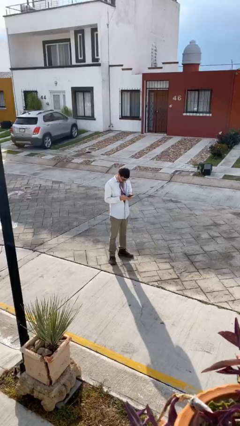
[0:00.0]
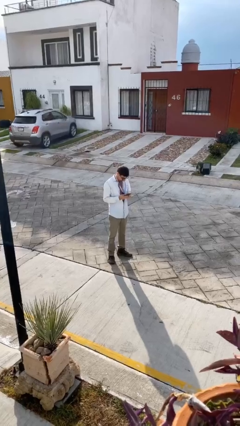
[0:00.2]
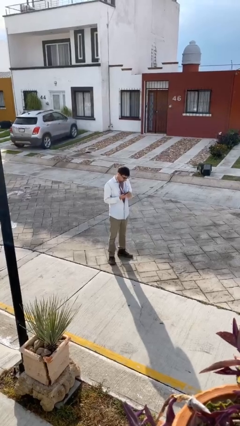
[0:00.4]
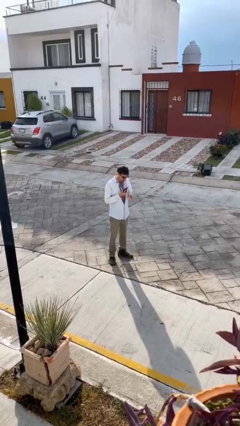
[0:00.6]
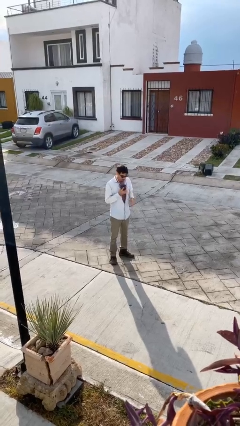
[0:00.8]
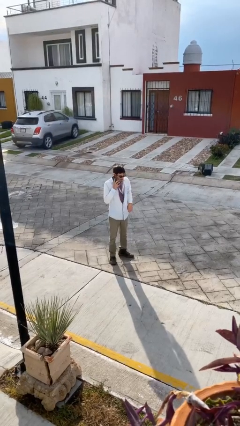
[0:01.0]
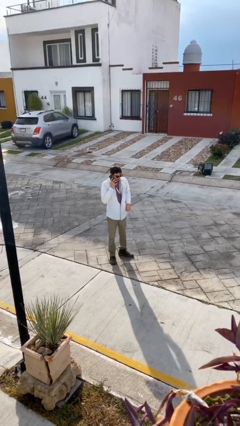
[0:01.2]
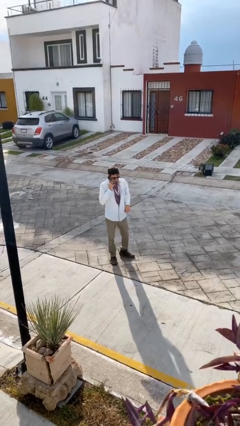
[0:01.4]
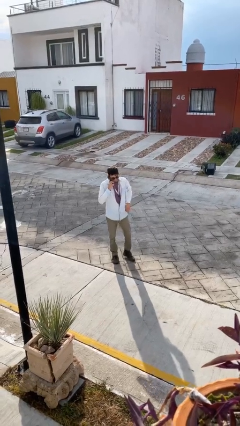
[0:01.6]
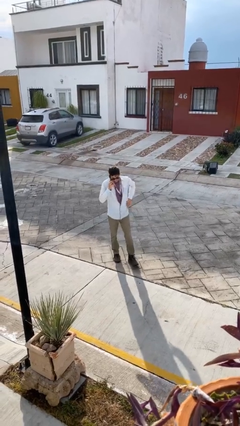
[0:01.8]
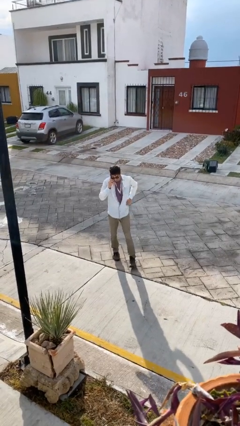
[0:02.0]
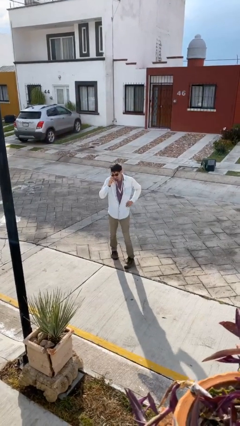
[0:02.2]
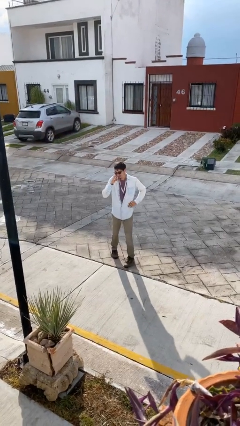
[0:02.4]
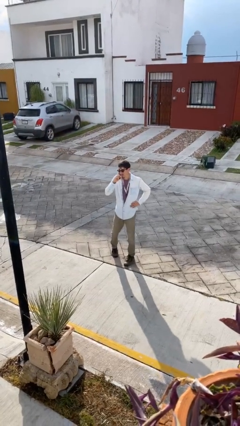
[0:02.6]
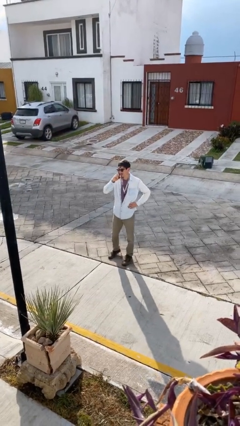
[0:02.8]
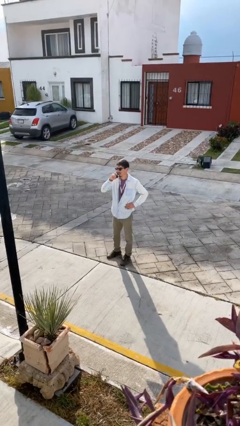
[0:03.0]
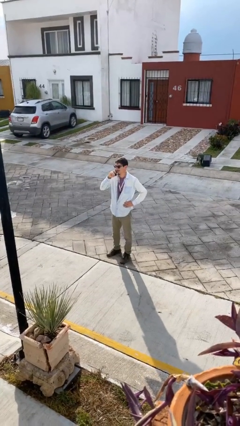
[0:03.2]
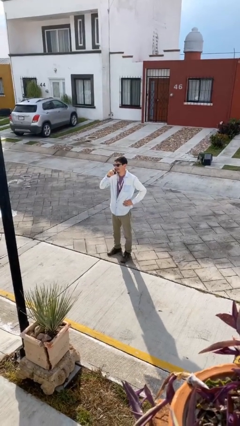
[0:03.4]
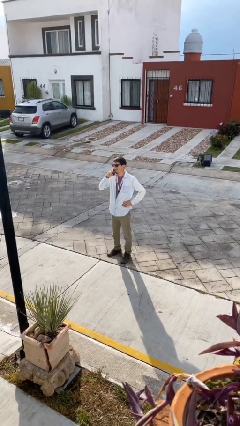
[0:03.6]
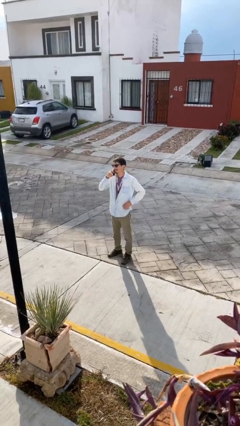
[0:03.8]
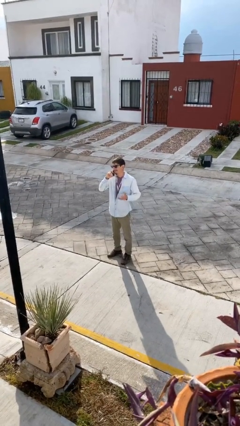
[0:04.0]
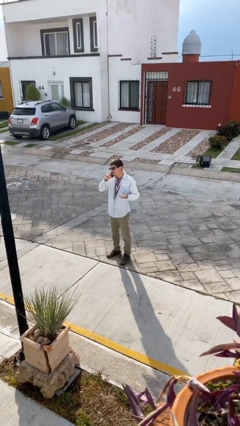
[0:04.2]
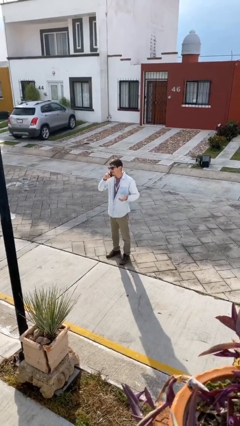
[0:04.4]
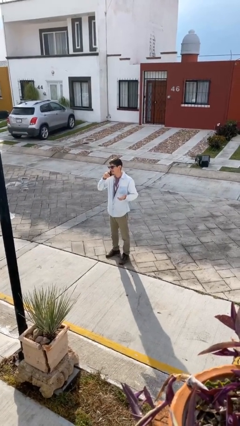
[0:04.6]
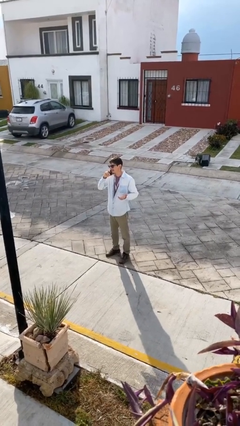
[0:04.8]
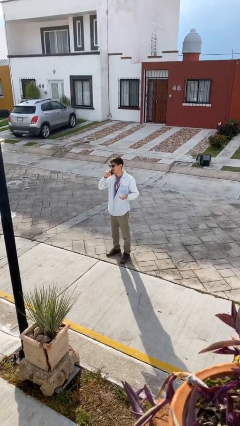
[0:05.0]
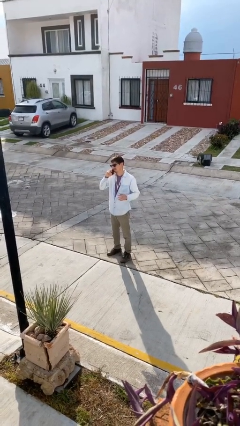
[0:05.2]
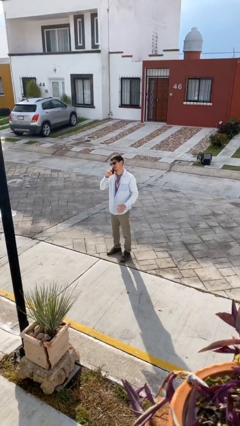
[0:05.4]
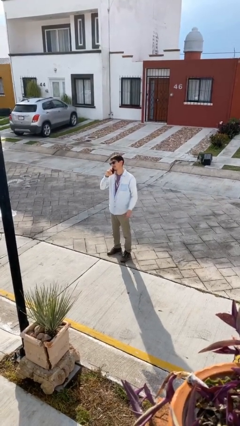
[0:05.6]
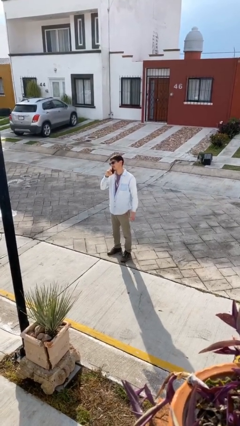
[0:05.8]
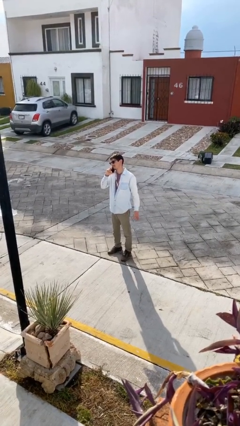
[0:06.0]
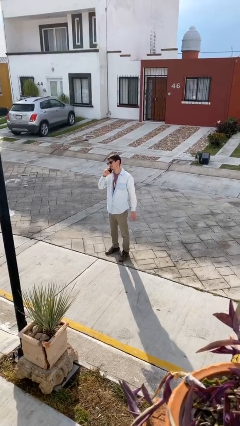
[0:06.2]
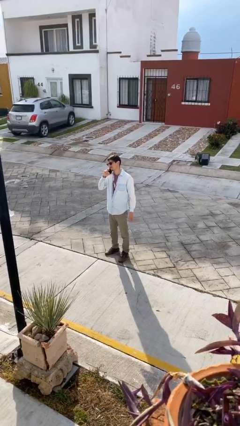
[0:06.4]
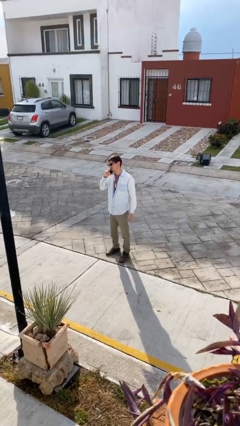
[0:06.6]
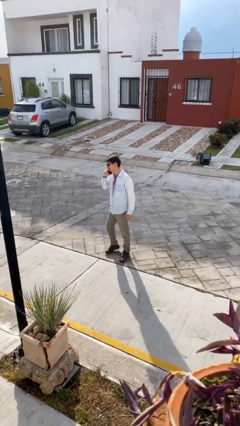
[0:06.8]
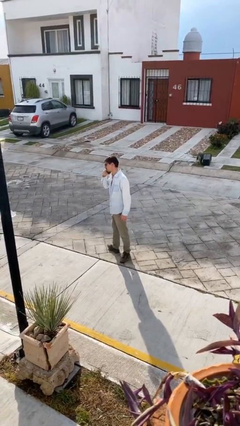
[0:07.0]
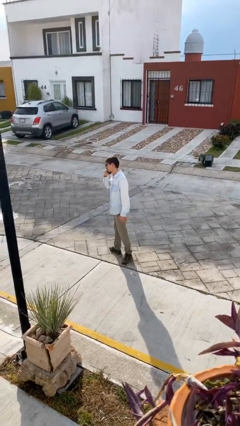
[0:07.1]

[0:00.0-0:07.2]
person talks on phone

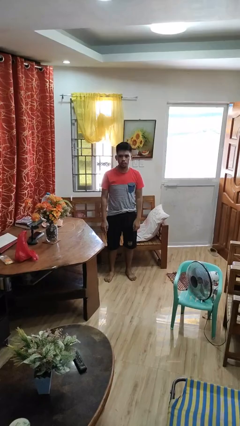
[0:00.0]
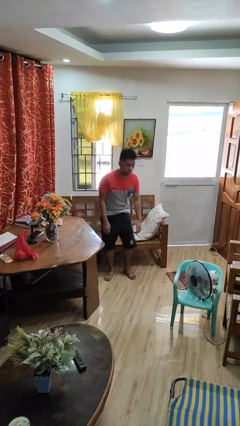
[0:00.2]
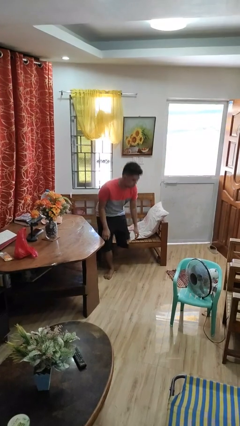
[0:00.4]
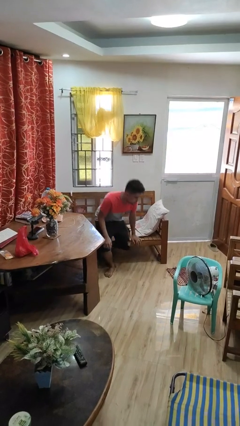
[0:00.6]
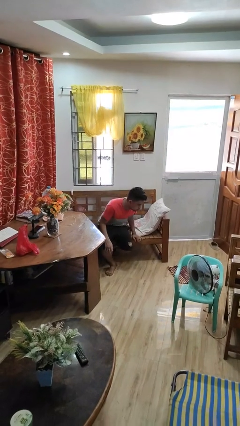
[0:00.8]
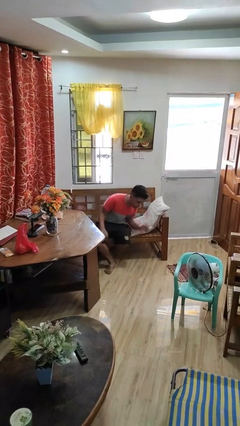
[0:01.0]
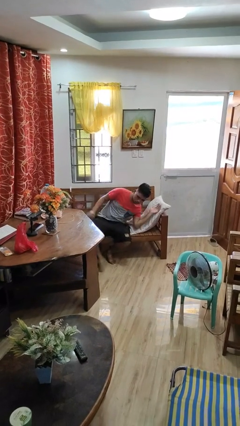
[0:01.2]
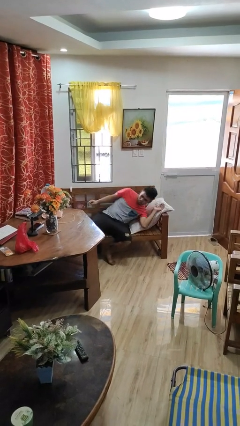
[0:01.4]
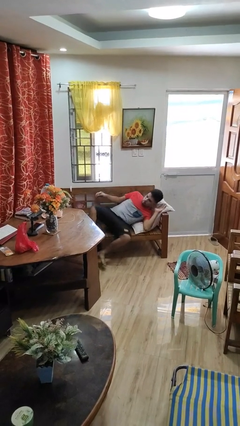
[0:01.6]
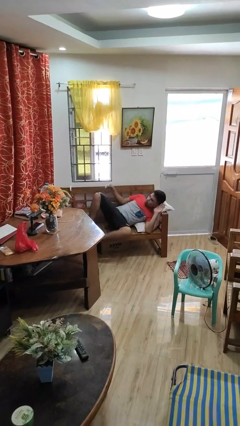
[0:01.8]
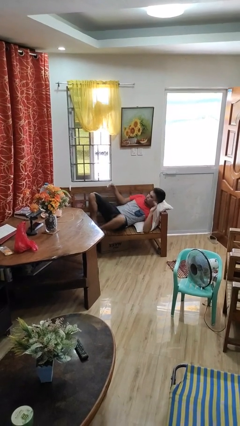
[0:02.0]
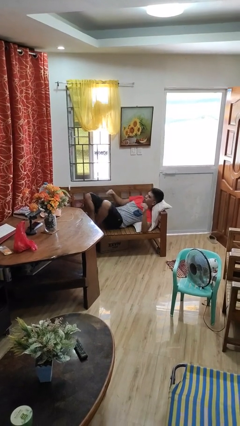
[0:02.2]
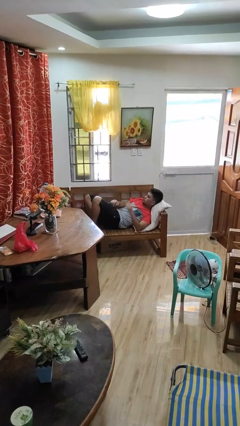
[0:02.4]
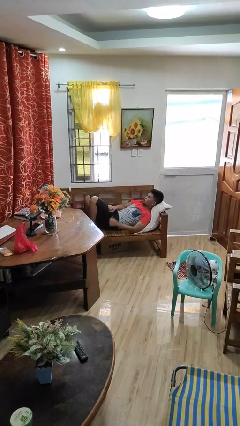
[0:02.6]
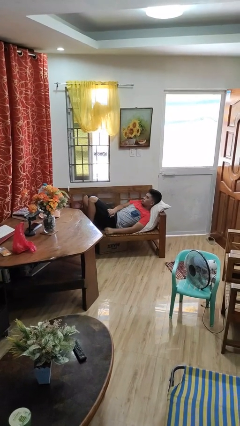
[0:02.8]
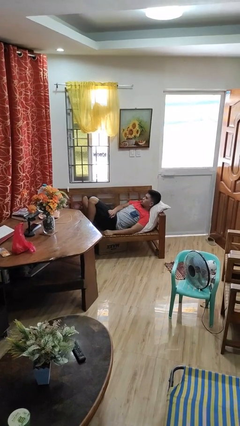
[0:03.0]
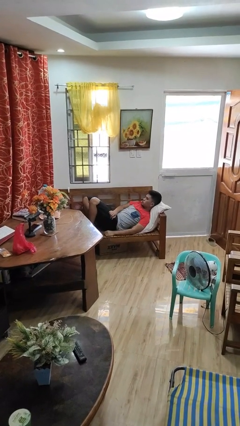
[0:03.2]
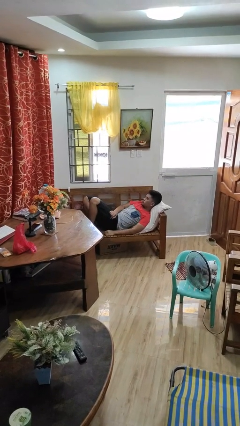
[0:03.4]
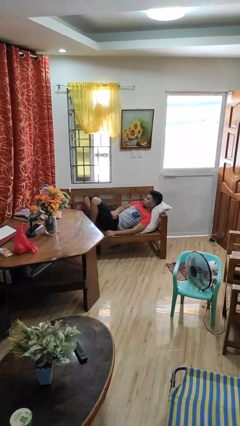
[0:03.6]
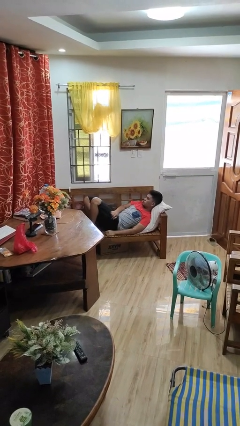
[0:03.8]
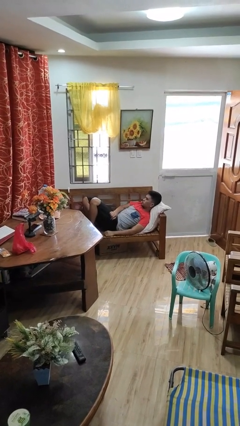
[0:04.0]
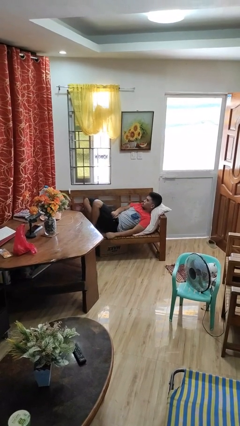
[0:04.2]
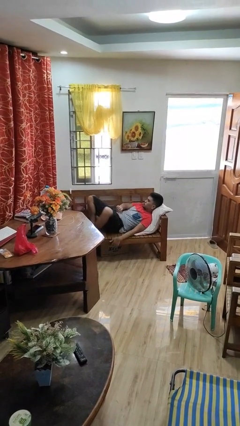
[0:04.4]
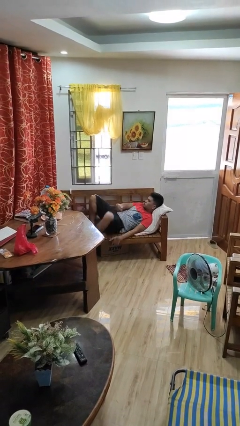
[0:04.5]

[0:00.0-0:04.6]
person lies down on couch

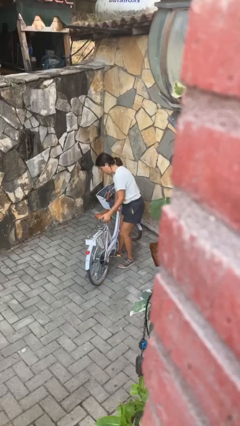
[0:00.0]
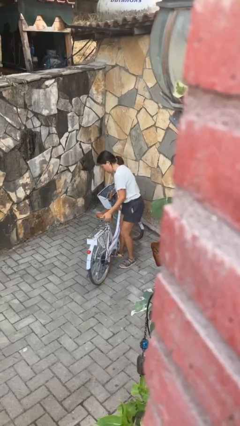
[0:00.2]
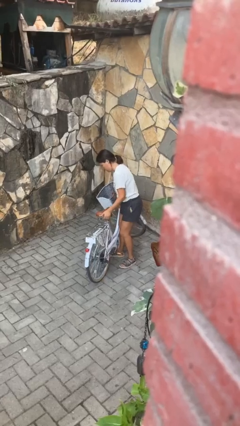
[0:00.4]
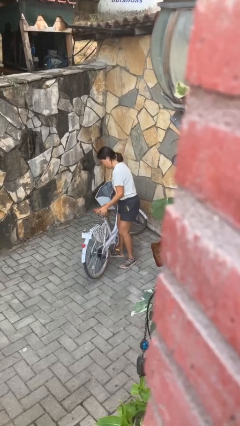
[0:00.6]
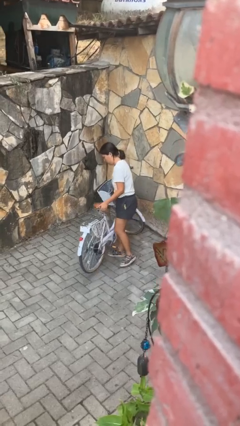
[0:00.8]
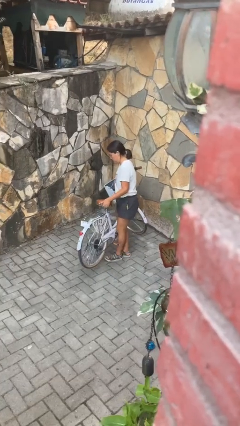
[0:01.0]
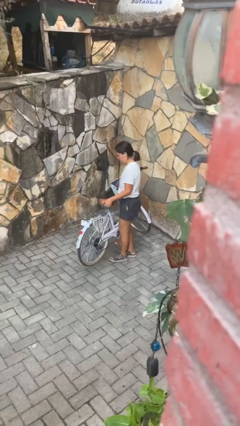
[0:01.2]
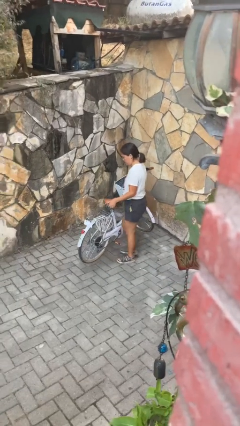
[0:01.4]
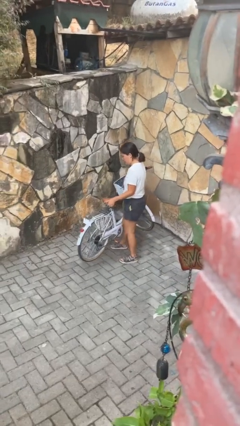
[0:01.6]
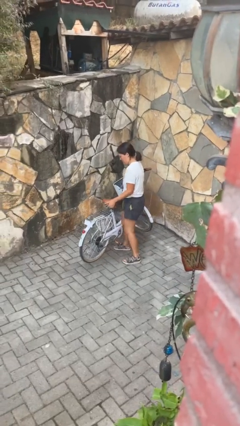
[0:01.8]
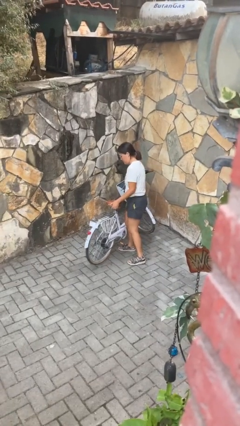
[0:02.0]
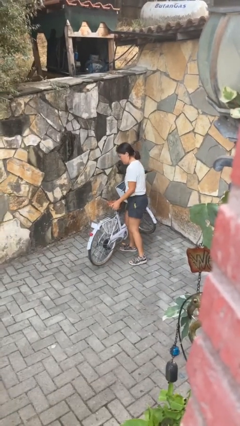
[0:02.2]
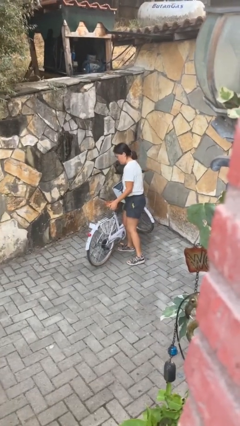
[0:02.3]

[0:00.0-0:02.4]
person carries bicycle

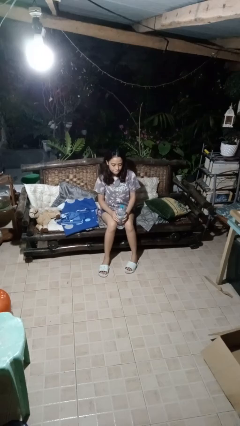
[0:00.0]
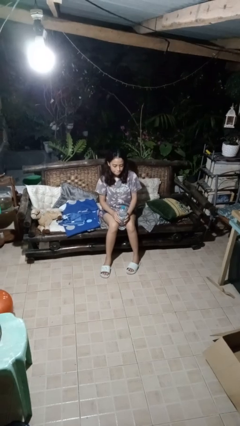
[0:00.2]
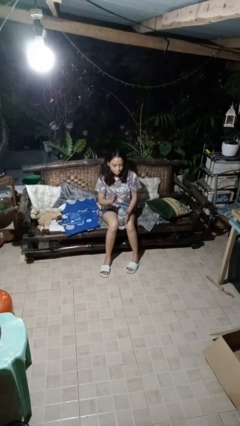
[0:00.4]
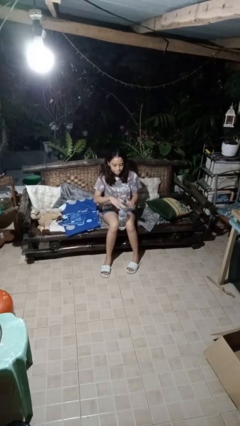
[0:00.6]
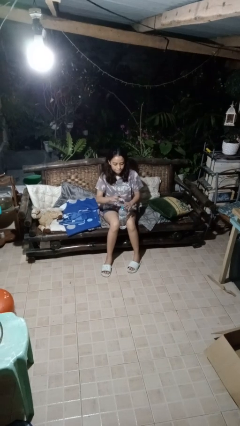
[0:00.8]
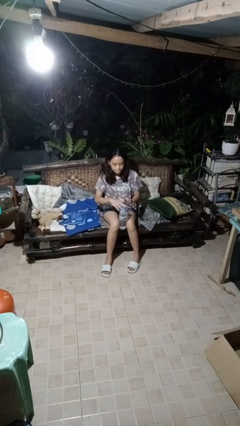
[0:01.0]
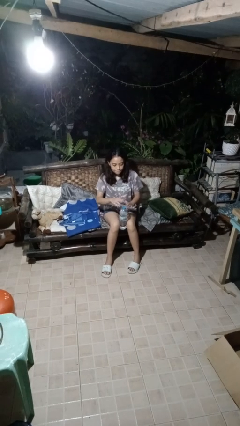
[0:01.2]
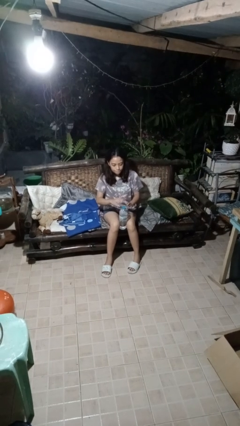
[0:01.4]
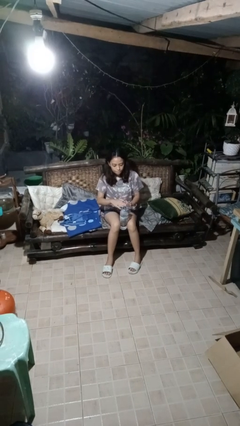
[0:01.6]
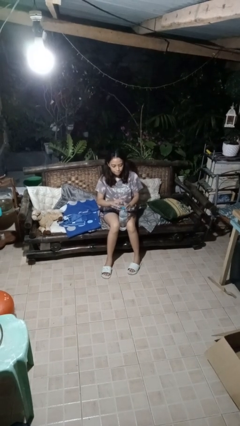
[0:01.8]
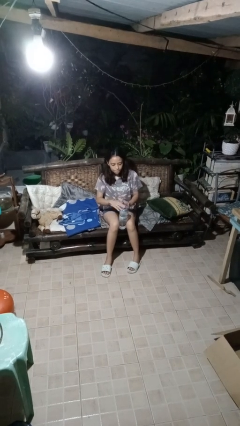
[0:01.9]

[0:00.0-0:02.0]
person taps object with finger

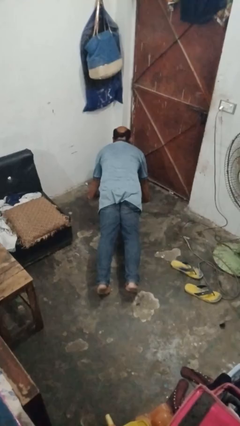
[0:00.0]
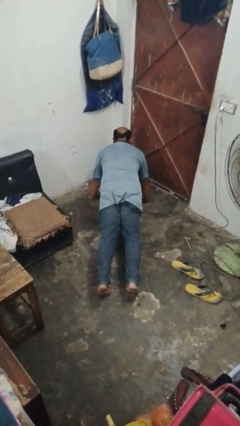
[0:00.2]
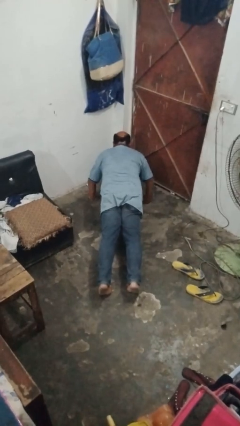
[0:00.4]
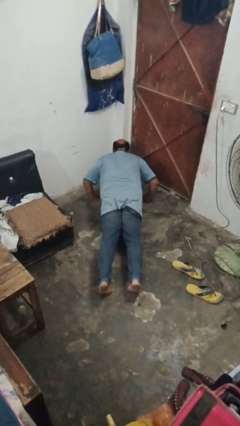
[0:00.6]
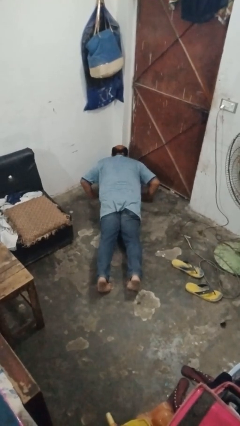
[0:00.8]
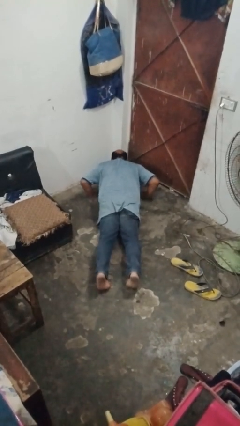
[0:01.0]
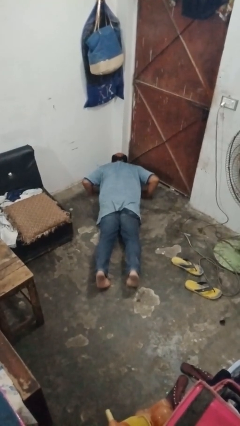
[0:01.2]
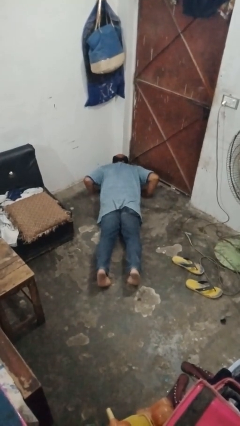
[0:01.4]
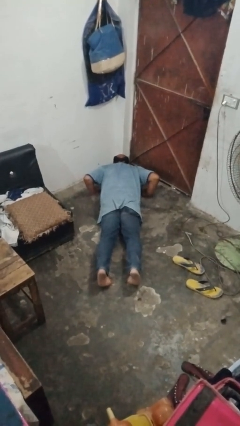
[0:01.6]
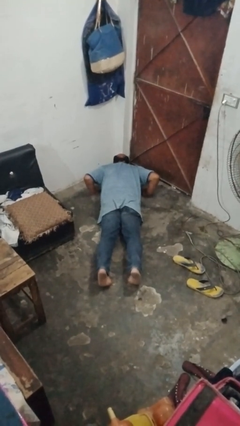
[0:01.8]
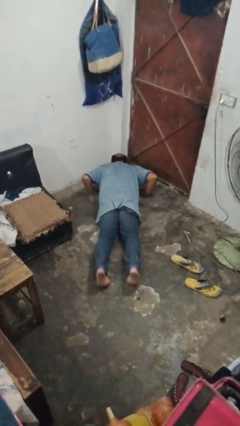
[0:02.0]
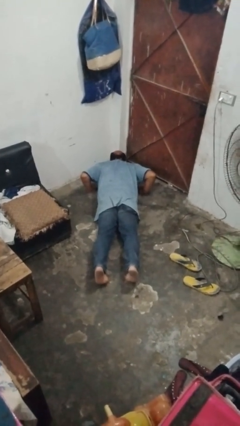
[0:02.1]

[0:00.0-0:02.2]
person exercises with pushup
